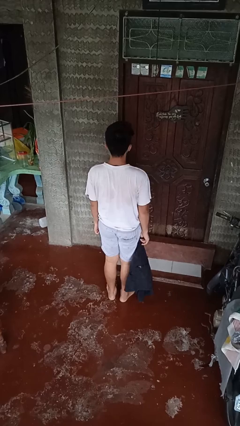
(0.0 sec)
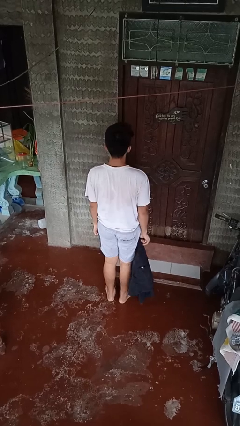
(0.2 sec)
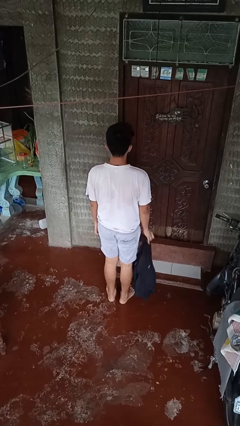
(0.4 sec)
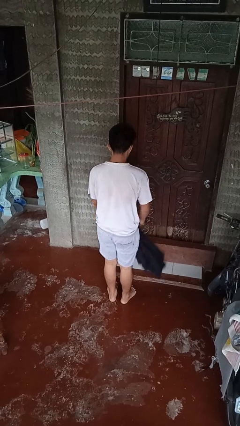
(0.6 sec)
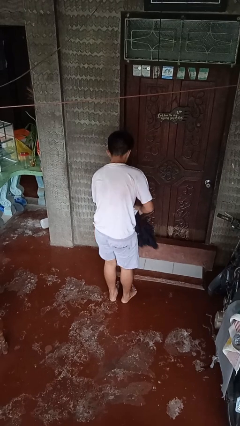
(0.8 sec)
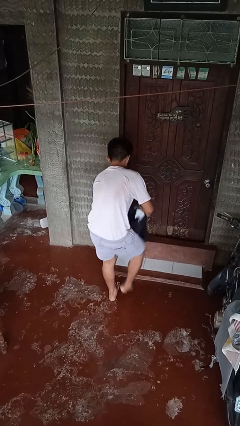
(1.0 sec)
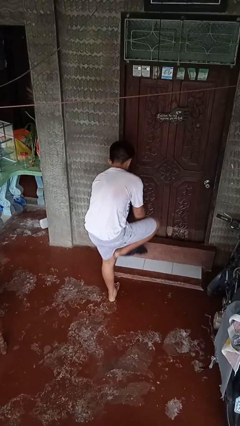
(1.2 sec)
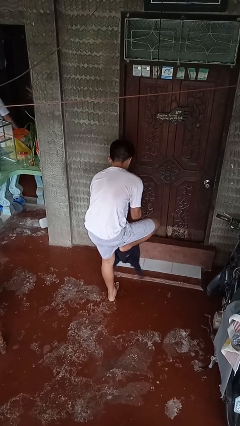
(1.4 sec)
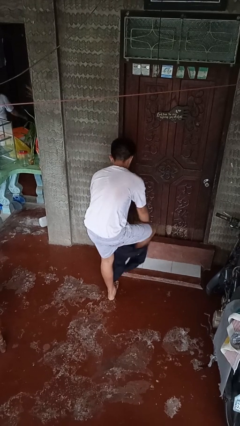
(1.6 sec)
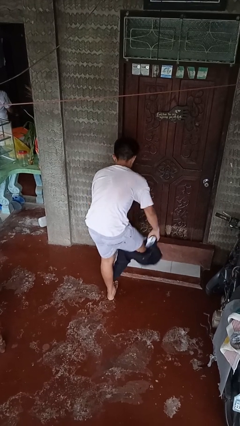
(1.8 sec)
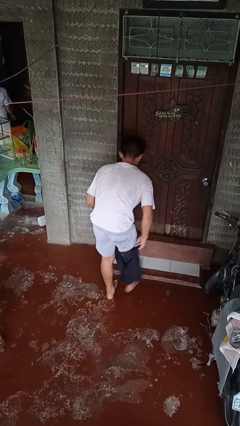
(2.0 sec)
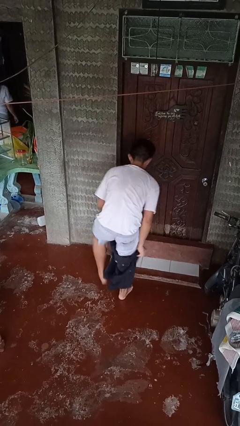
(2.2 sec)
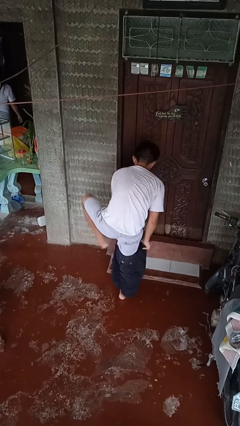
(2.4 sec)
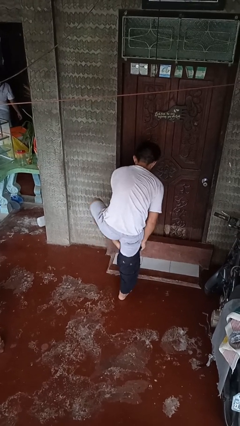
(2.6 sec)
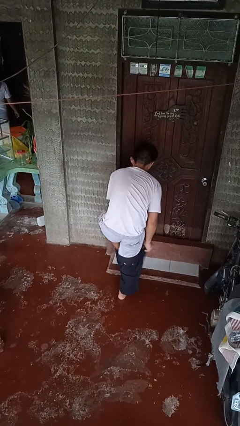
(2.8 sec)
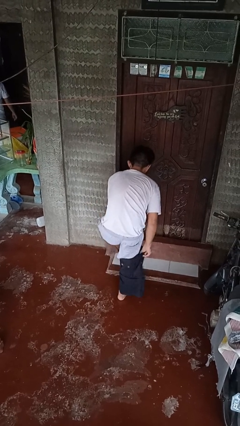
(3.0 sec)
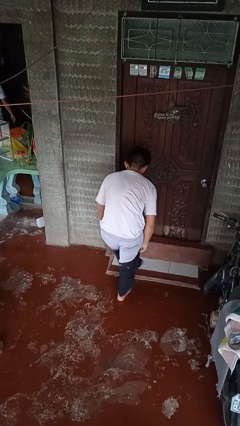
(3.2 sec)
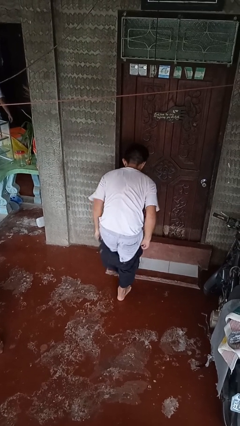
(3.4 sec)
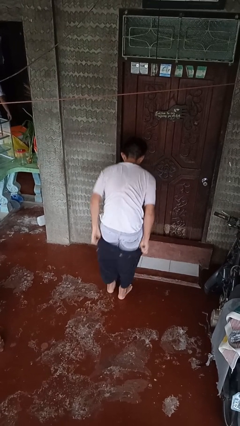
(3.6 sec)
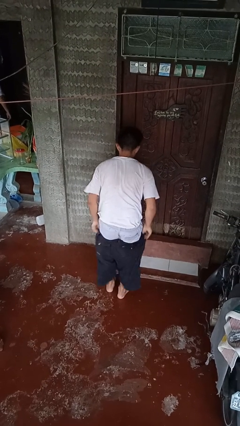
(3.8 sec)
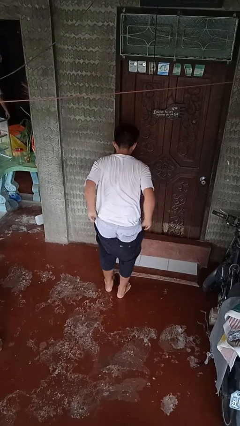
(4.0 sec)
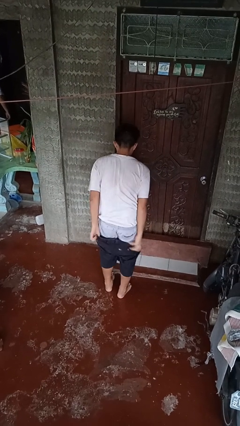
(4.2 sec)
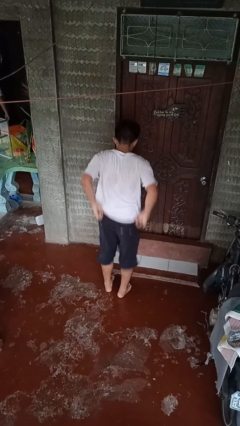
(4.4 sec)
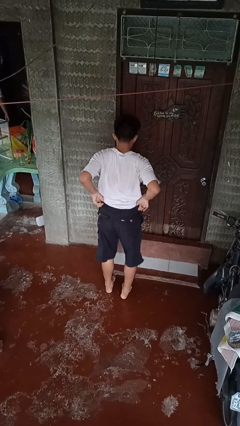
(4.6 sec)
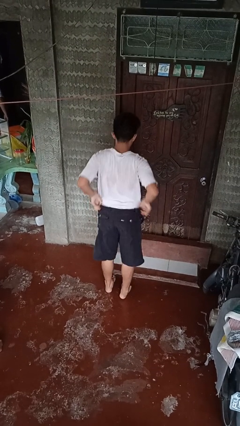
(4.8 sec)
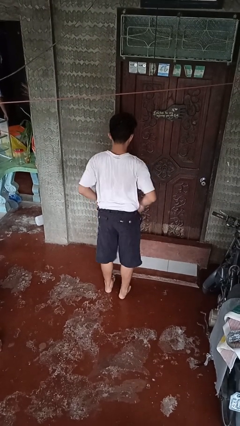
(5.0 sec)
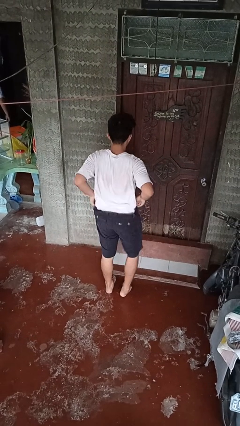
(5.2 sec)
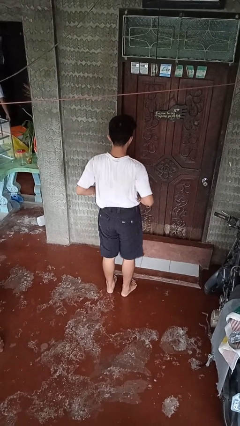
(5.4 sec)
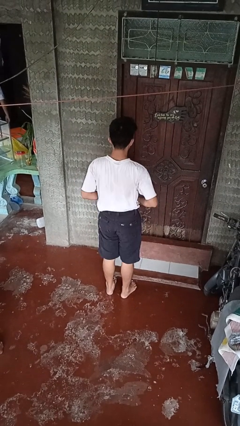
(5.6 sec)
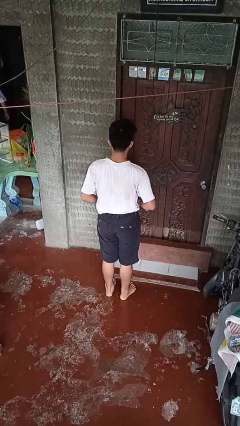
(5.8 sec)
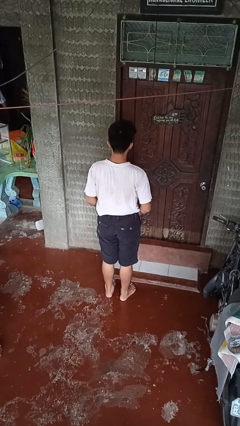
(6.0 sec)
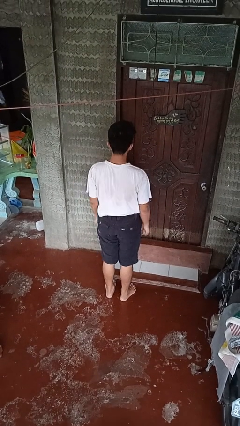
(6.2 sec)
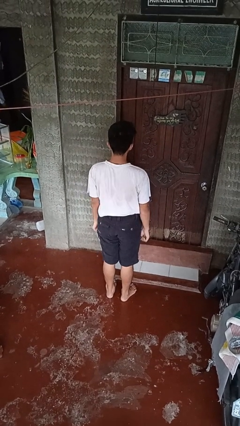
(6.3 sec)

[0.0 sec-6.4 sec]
person puts on pants

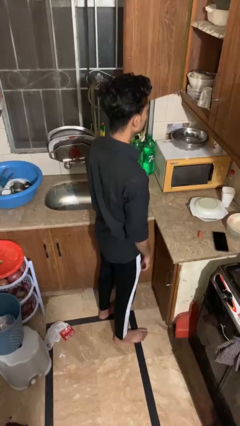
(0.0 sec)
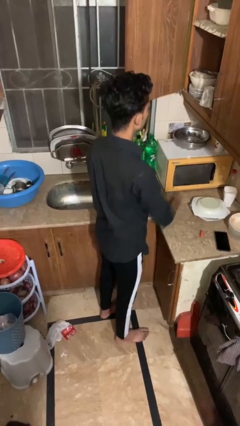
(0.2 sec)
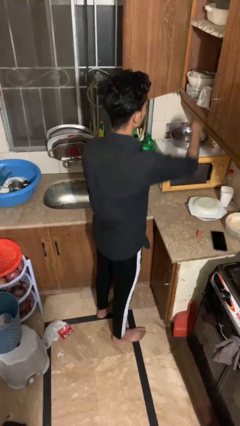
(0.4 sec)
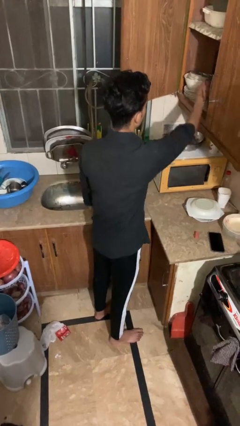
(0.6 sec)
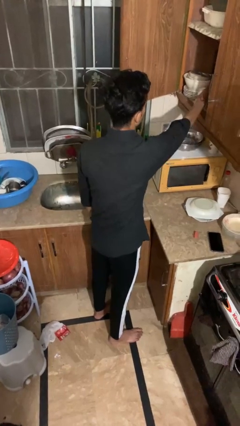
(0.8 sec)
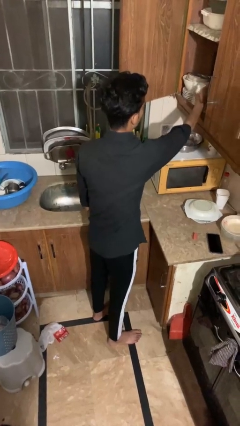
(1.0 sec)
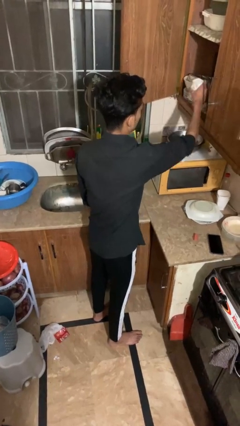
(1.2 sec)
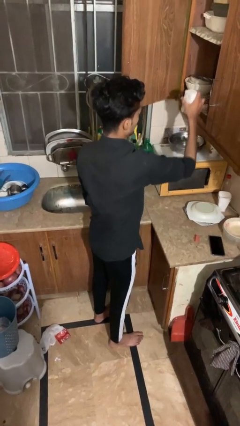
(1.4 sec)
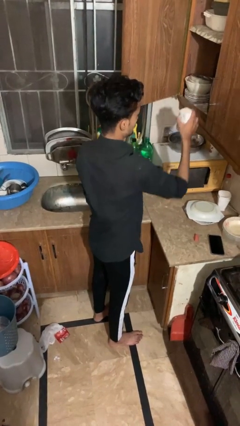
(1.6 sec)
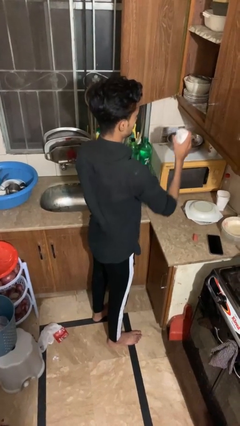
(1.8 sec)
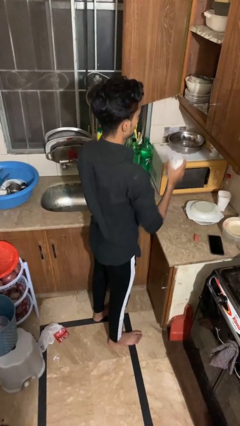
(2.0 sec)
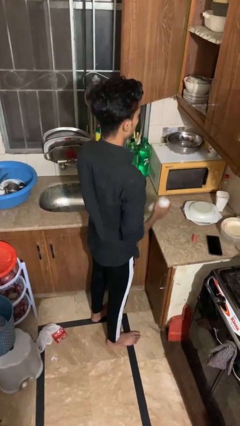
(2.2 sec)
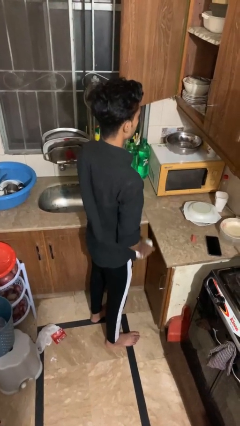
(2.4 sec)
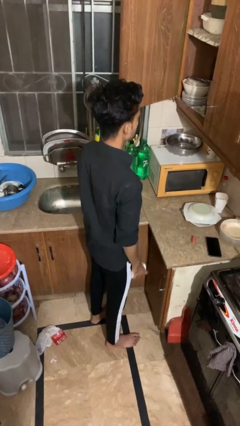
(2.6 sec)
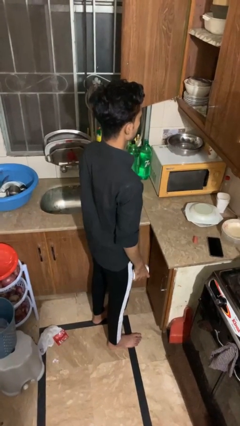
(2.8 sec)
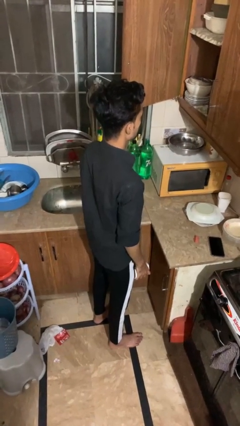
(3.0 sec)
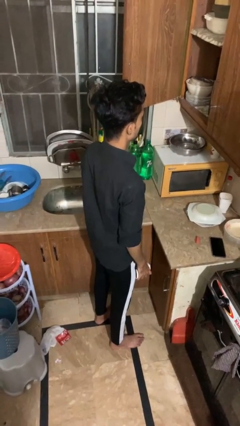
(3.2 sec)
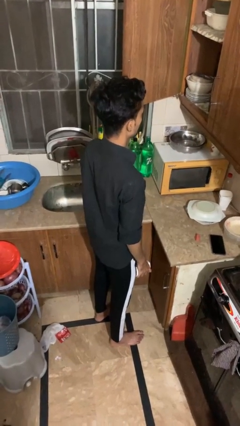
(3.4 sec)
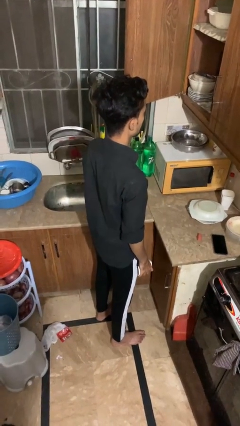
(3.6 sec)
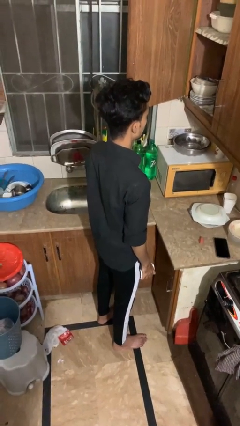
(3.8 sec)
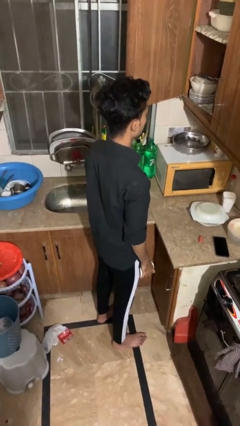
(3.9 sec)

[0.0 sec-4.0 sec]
person picks up object from cabinet

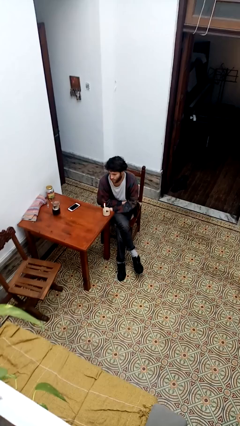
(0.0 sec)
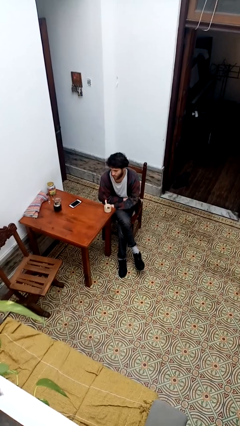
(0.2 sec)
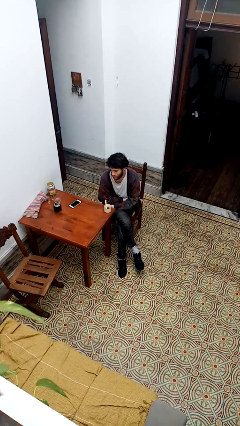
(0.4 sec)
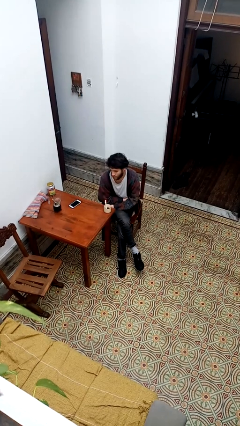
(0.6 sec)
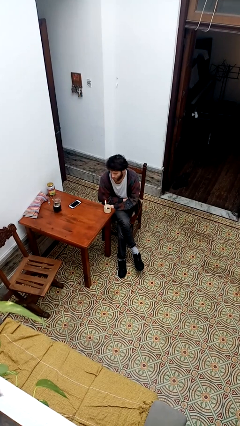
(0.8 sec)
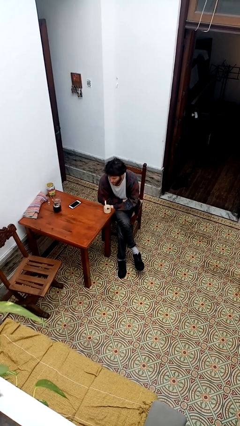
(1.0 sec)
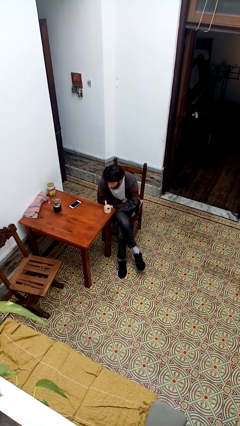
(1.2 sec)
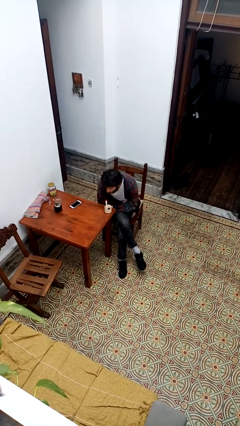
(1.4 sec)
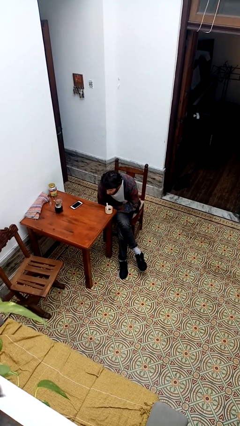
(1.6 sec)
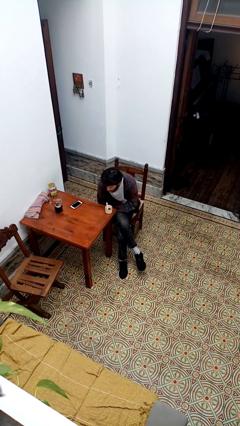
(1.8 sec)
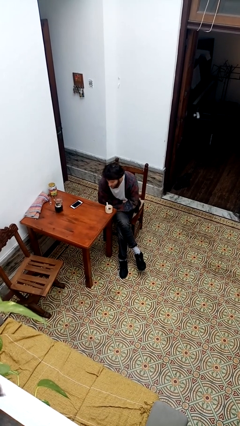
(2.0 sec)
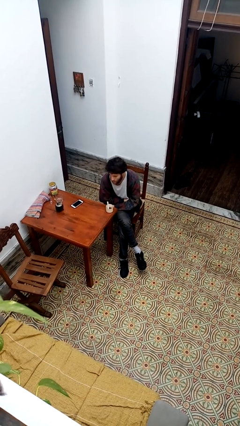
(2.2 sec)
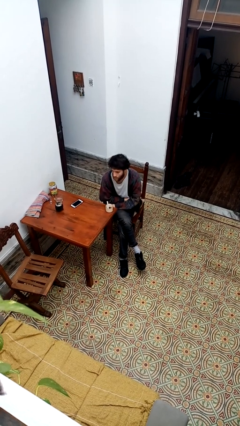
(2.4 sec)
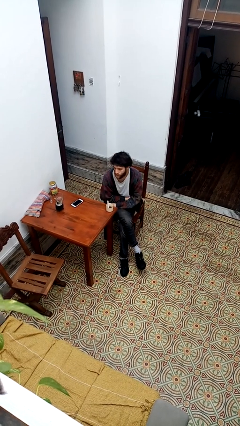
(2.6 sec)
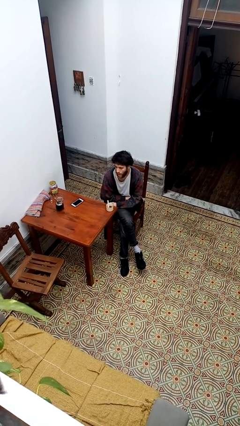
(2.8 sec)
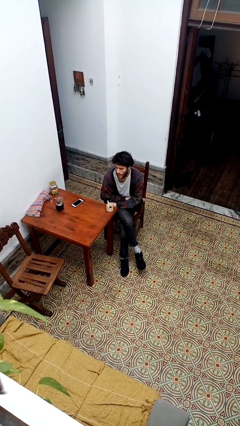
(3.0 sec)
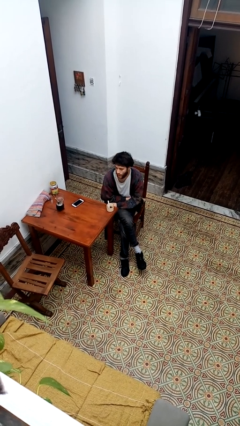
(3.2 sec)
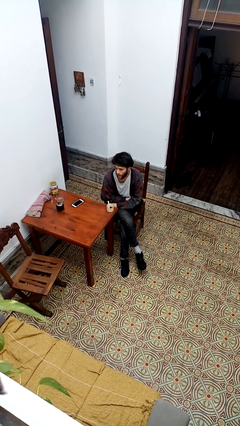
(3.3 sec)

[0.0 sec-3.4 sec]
person extinguishes candle

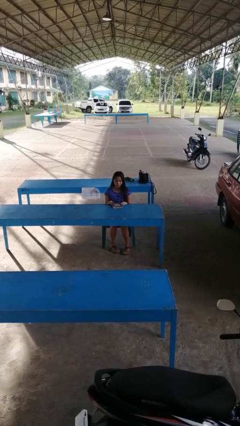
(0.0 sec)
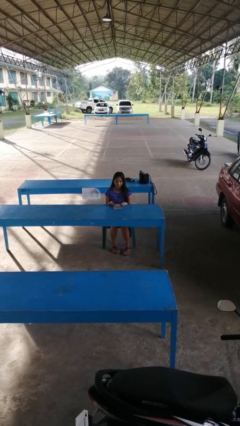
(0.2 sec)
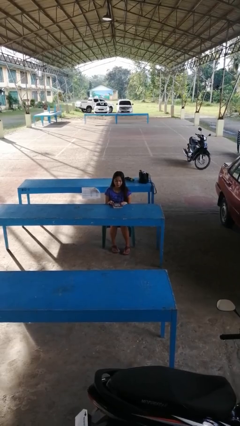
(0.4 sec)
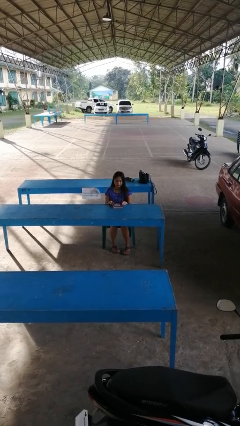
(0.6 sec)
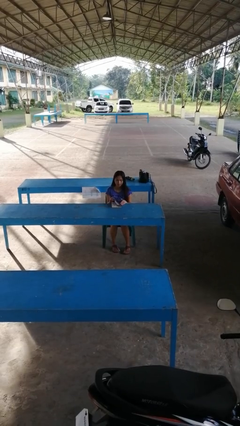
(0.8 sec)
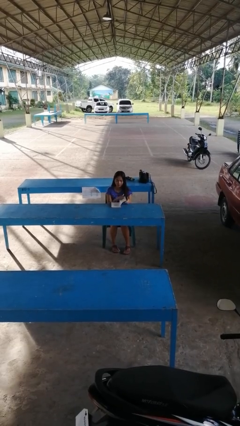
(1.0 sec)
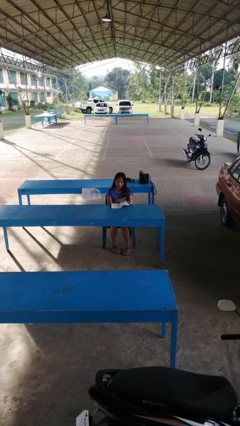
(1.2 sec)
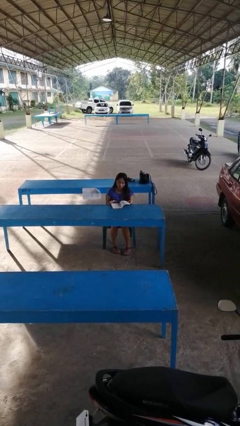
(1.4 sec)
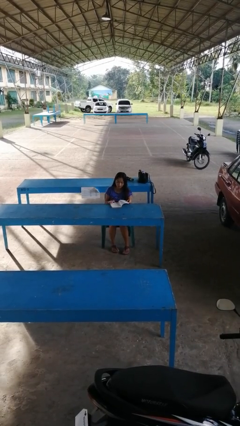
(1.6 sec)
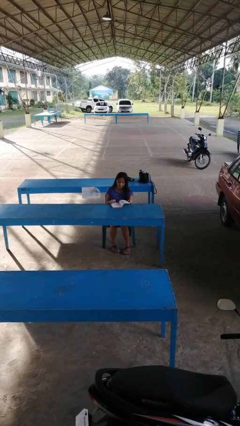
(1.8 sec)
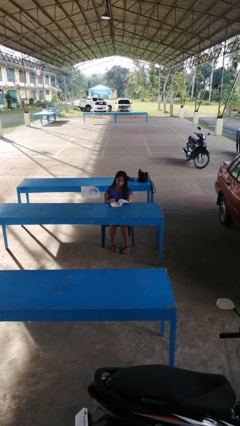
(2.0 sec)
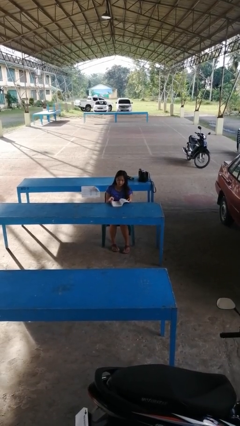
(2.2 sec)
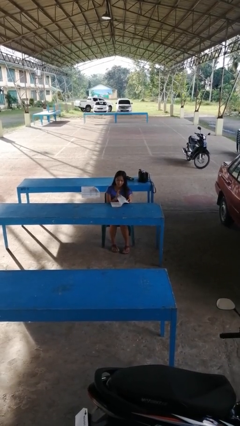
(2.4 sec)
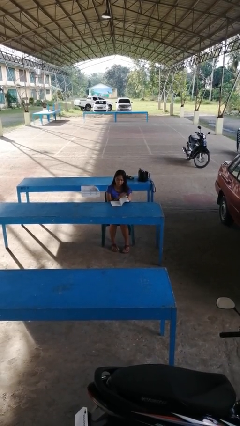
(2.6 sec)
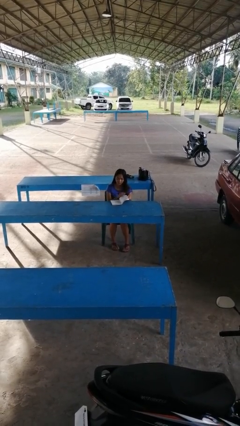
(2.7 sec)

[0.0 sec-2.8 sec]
person reads book

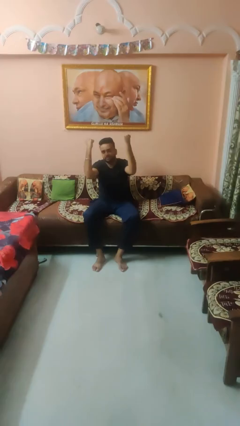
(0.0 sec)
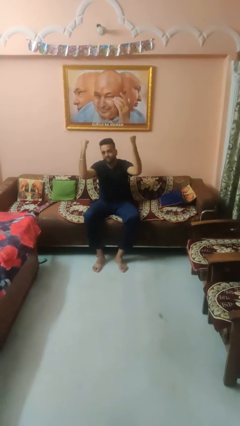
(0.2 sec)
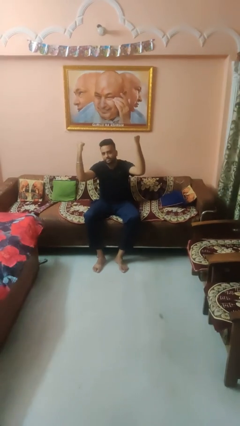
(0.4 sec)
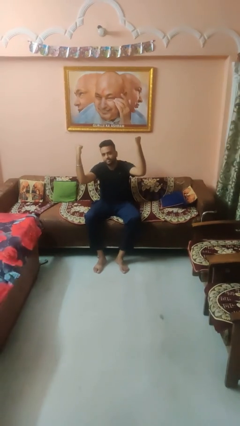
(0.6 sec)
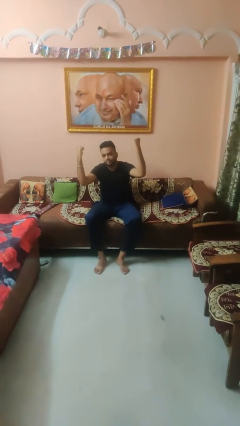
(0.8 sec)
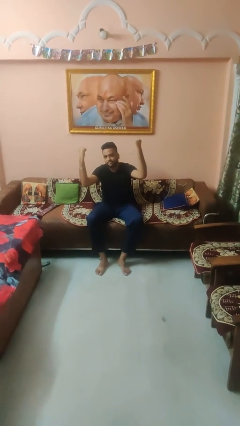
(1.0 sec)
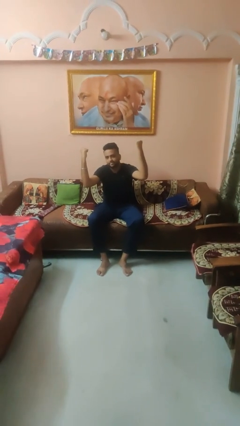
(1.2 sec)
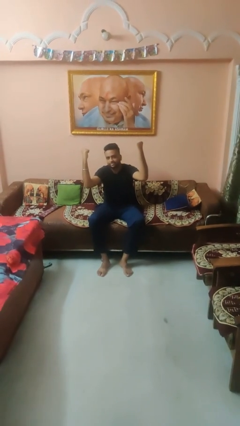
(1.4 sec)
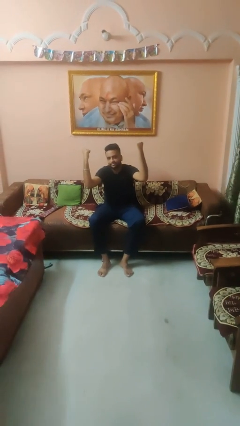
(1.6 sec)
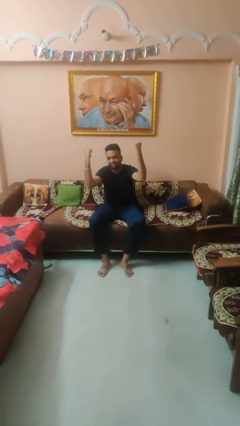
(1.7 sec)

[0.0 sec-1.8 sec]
person gestures zoom in
